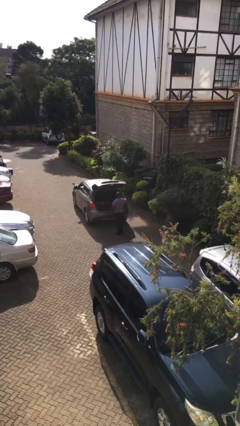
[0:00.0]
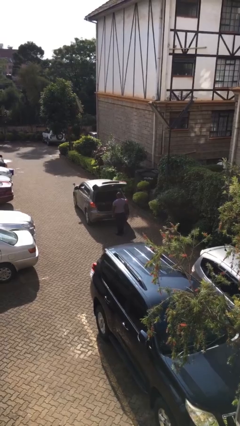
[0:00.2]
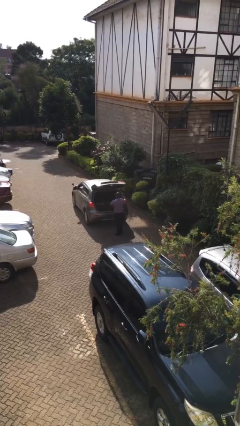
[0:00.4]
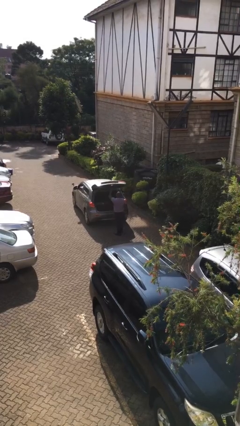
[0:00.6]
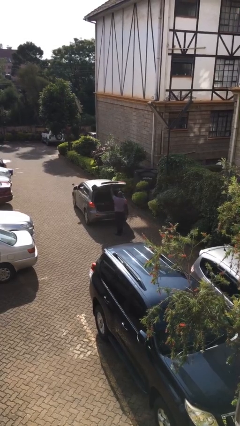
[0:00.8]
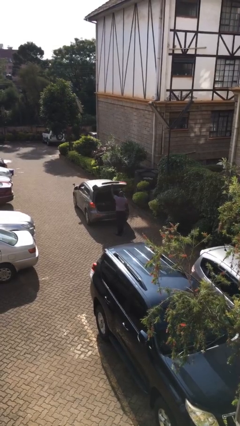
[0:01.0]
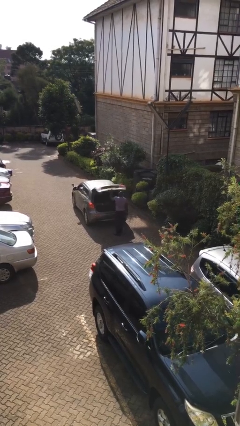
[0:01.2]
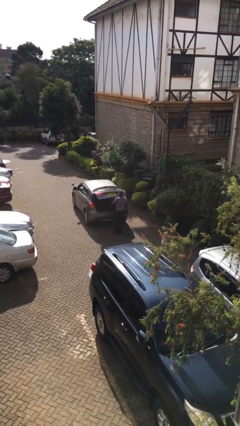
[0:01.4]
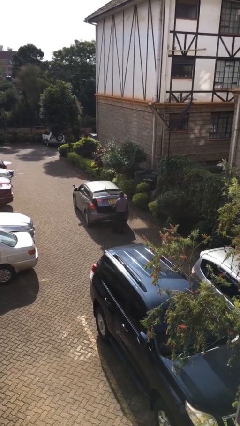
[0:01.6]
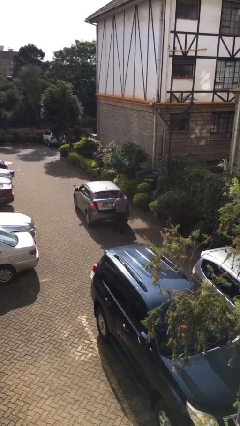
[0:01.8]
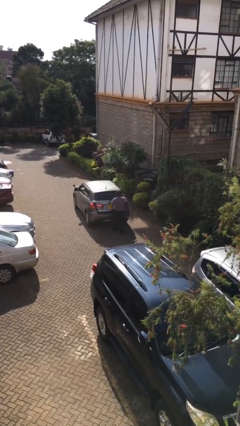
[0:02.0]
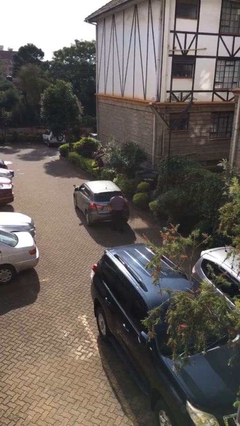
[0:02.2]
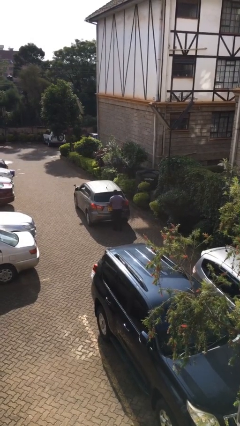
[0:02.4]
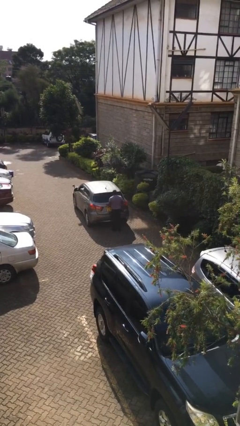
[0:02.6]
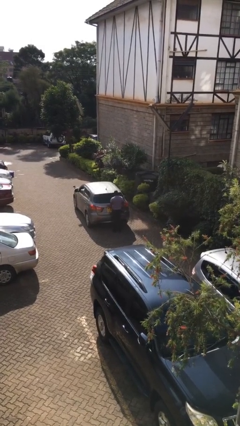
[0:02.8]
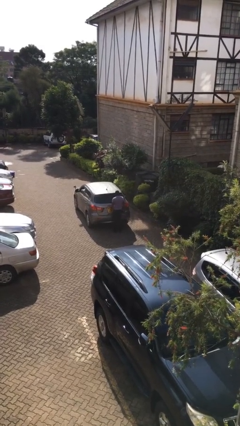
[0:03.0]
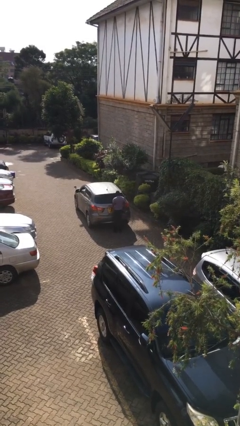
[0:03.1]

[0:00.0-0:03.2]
person closes car trunk

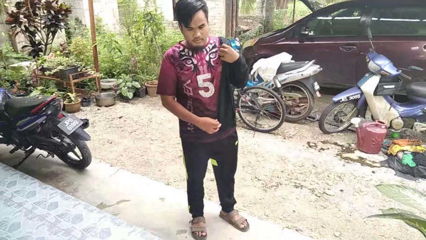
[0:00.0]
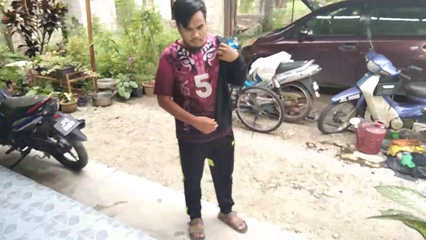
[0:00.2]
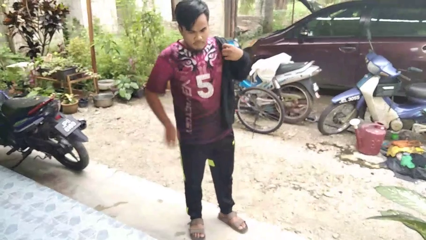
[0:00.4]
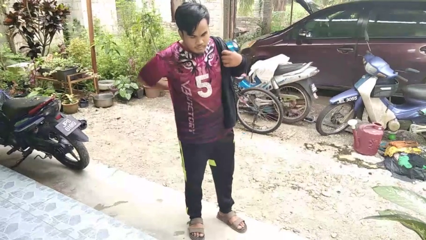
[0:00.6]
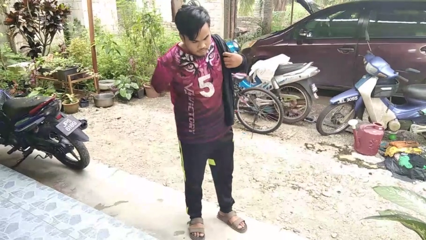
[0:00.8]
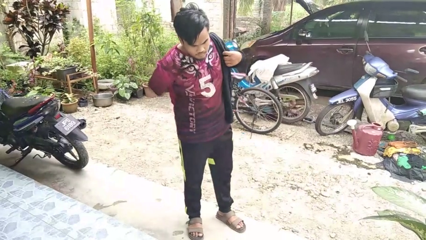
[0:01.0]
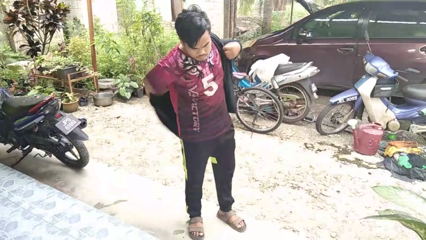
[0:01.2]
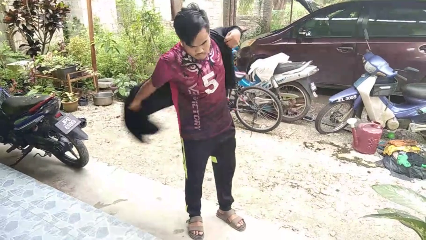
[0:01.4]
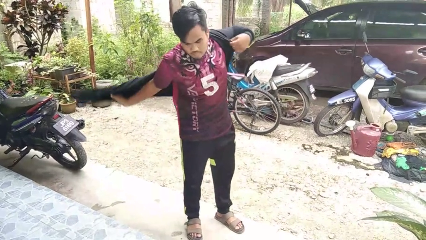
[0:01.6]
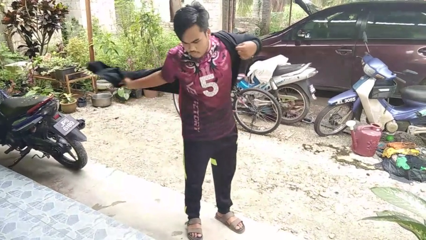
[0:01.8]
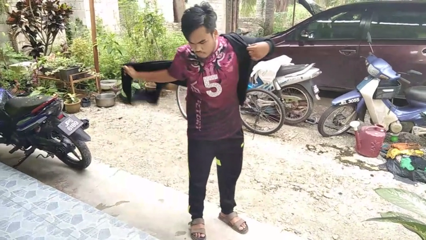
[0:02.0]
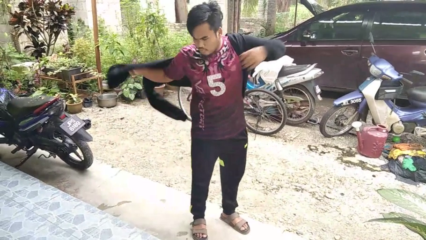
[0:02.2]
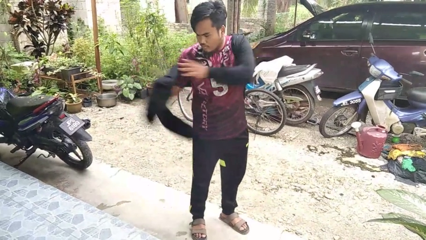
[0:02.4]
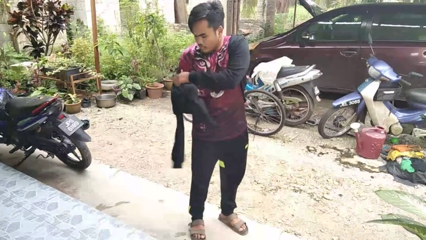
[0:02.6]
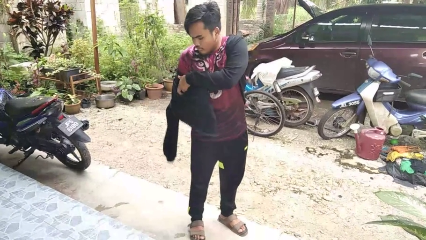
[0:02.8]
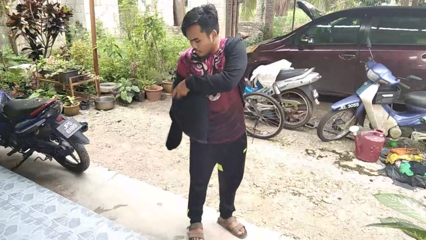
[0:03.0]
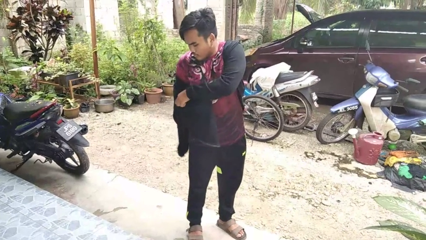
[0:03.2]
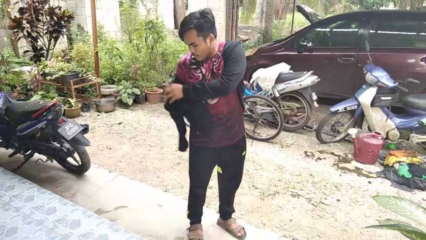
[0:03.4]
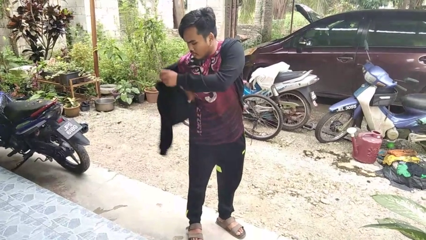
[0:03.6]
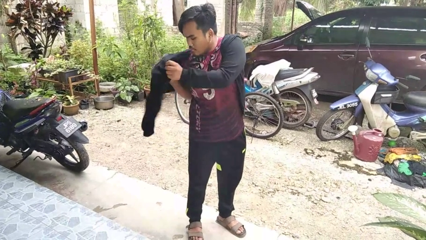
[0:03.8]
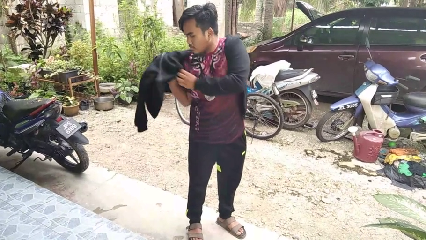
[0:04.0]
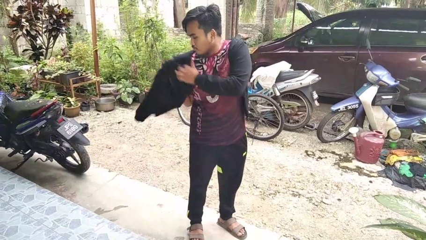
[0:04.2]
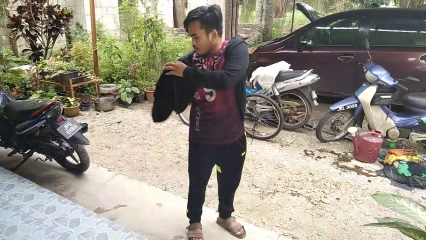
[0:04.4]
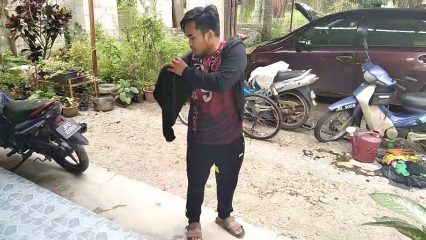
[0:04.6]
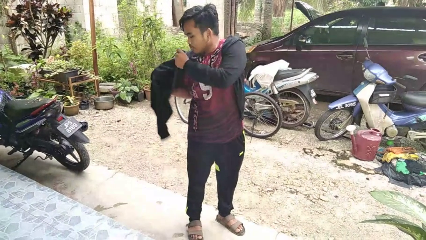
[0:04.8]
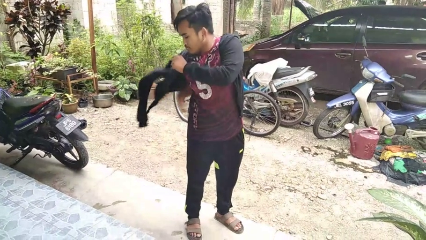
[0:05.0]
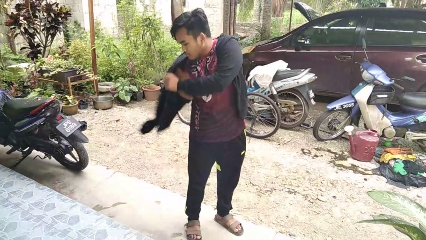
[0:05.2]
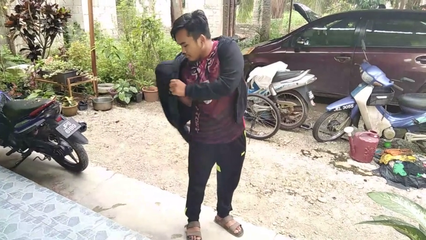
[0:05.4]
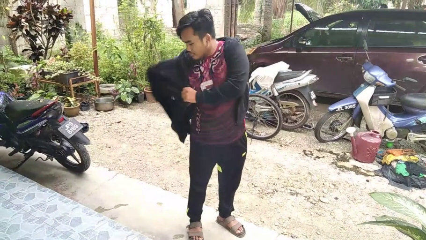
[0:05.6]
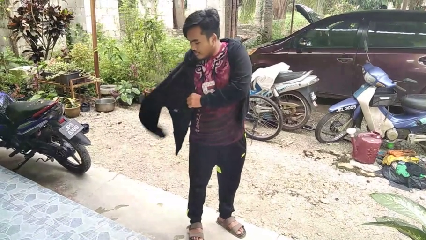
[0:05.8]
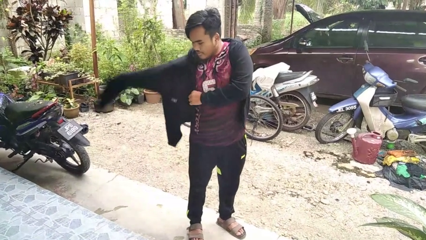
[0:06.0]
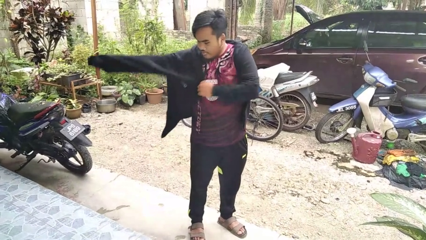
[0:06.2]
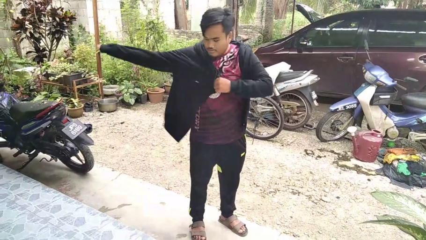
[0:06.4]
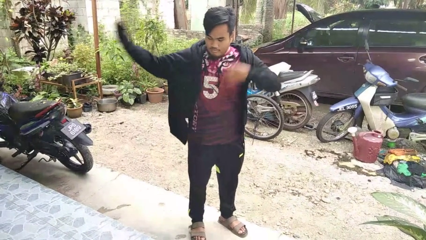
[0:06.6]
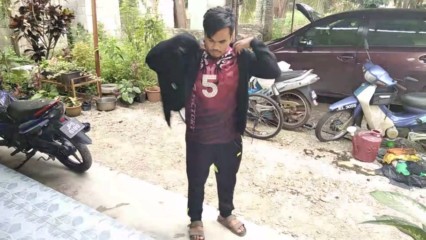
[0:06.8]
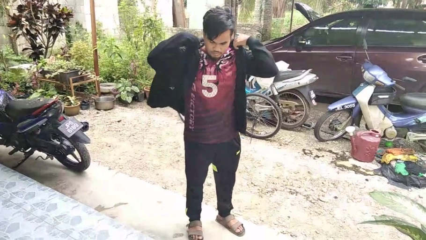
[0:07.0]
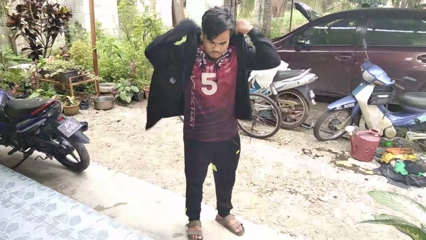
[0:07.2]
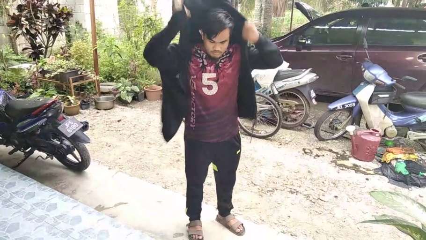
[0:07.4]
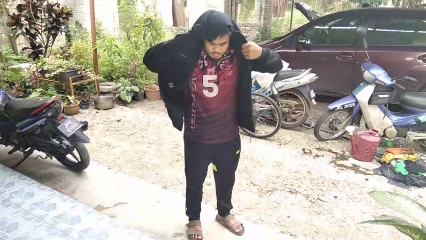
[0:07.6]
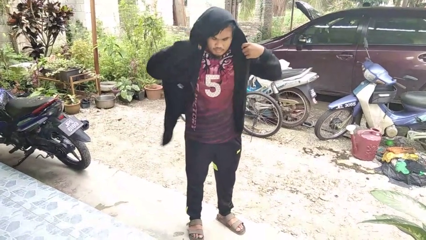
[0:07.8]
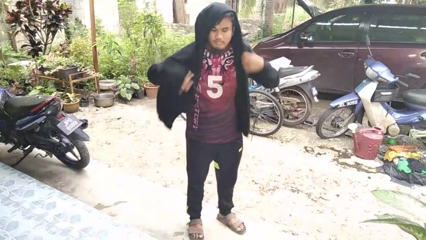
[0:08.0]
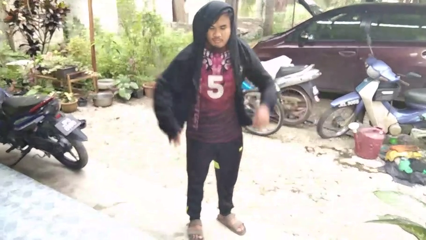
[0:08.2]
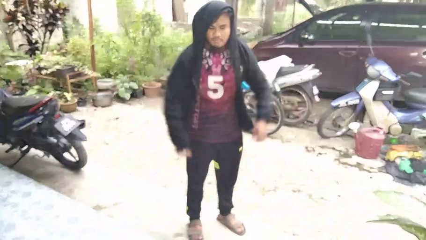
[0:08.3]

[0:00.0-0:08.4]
person puts on hoodie

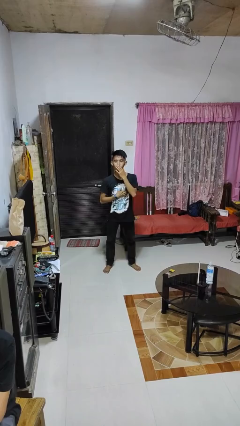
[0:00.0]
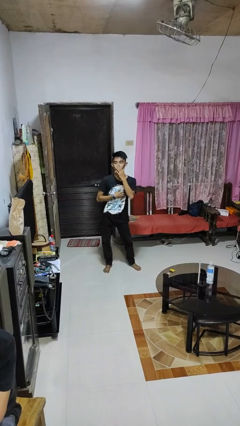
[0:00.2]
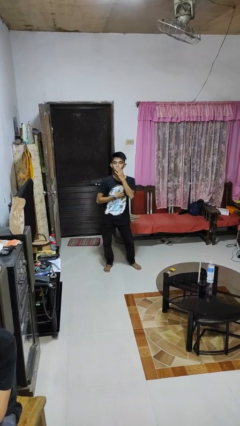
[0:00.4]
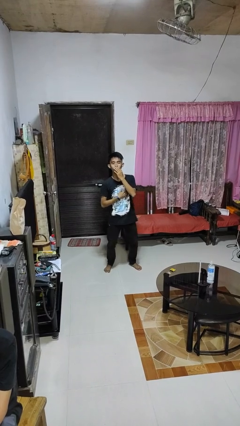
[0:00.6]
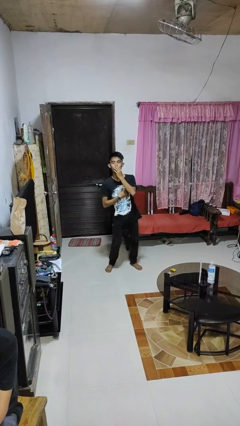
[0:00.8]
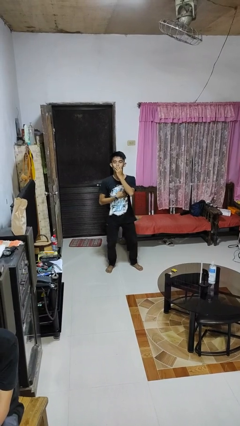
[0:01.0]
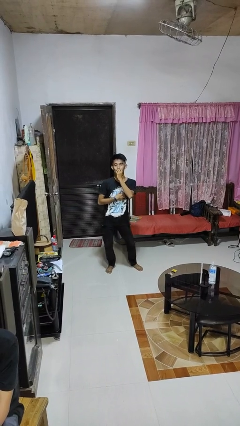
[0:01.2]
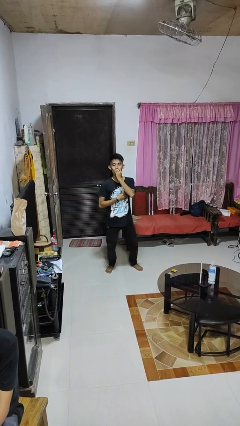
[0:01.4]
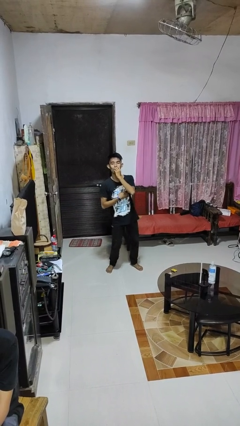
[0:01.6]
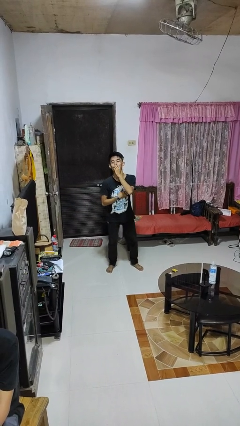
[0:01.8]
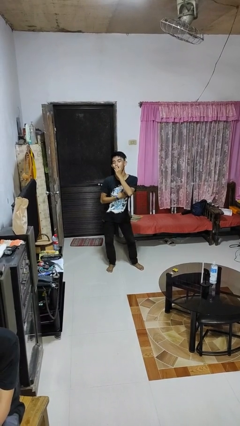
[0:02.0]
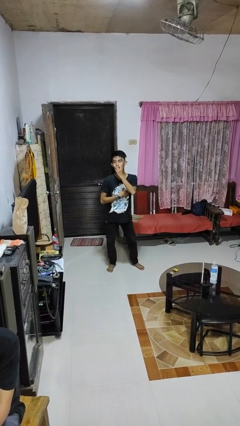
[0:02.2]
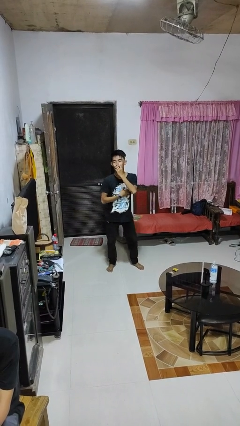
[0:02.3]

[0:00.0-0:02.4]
person wiggles hips

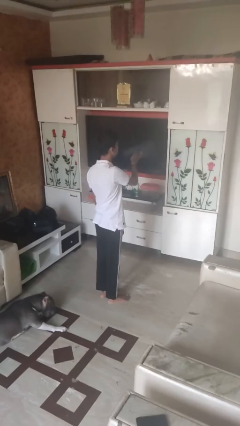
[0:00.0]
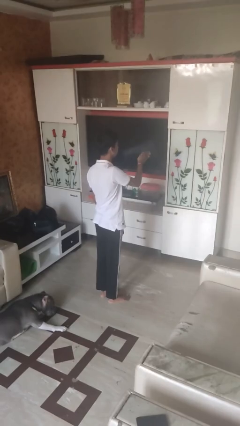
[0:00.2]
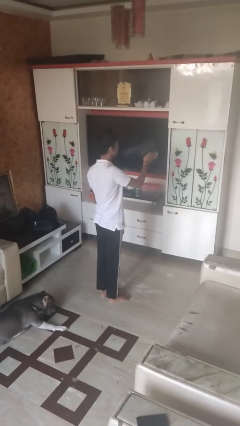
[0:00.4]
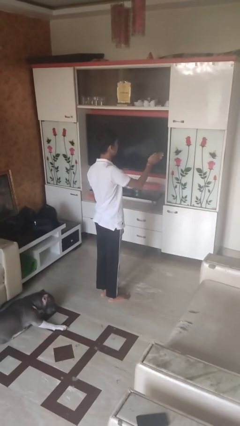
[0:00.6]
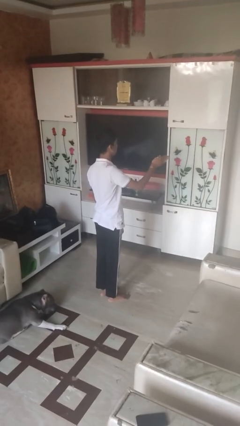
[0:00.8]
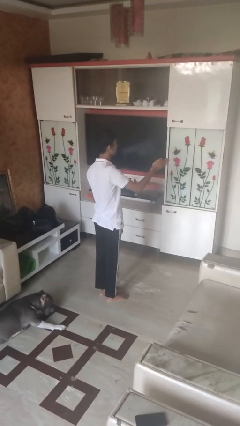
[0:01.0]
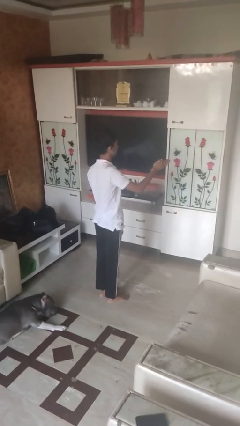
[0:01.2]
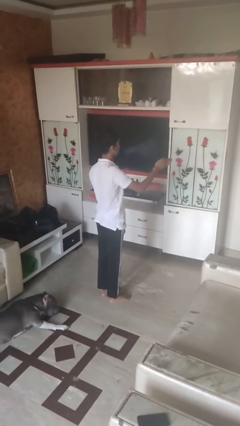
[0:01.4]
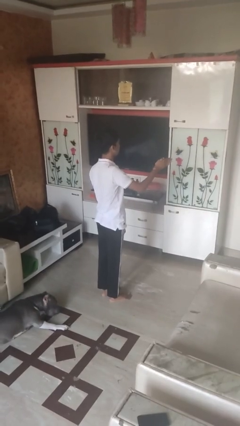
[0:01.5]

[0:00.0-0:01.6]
person gestures swipe right

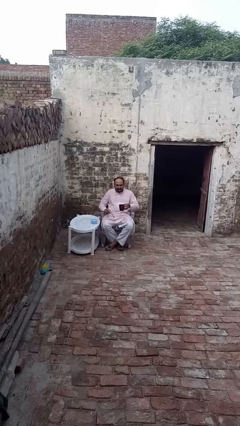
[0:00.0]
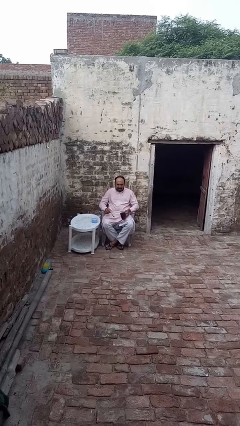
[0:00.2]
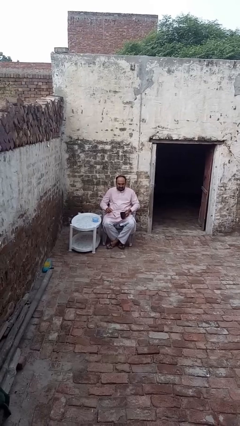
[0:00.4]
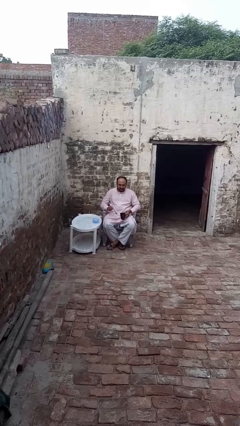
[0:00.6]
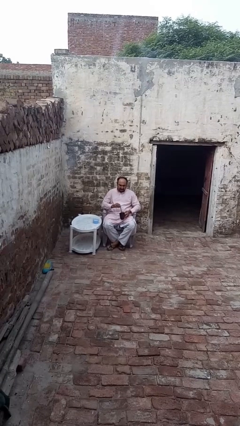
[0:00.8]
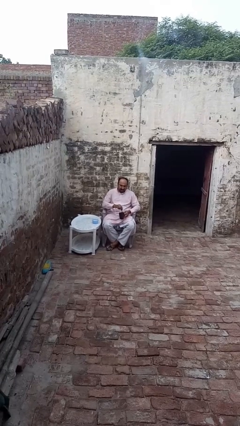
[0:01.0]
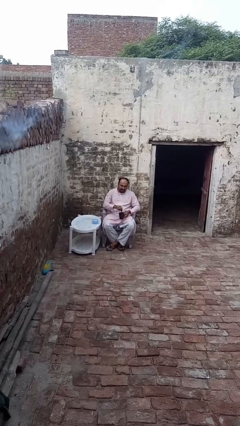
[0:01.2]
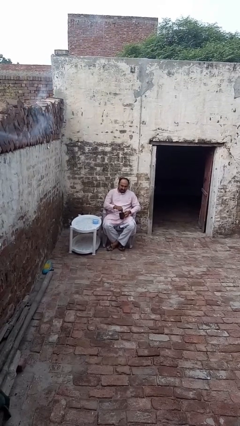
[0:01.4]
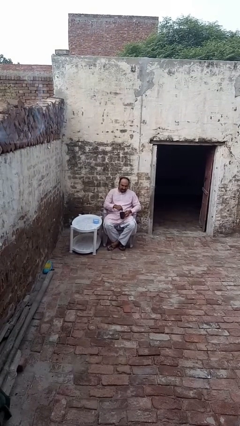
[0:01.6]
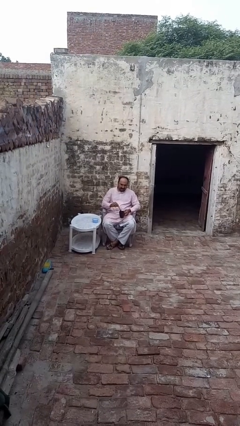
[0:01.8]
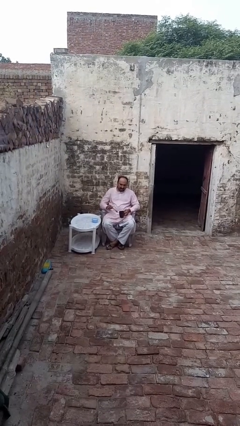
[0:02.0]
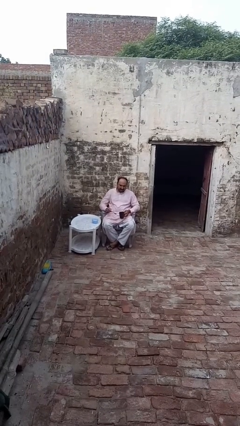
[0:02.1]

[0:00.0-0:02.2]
person stirs mug
